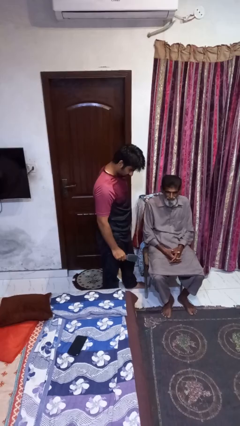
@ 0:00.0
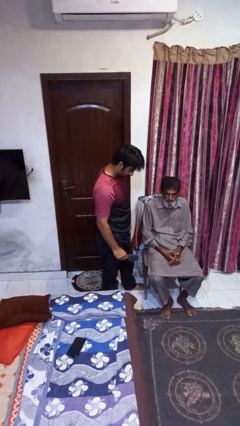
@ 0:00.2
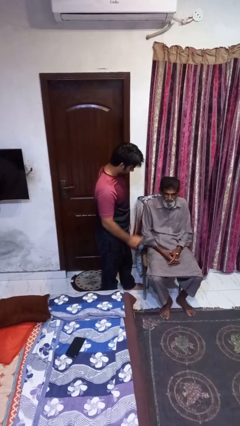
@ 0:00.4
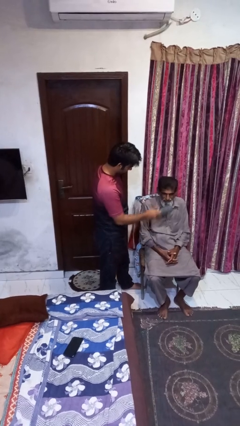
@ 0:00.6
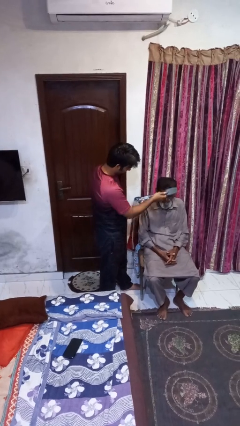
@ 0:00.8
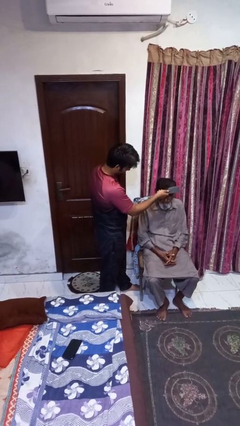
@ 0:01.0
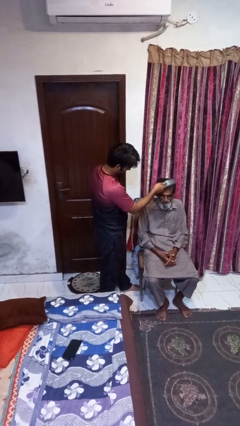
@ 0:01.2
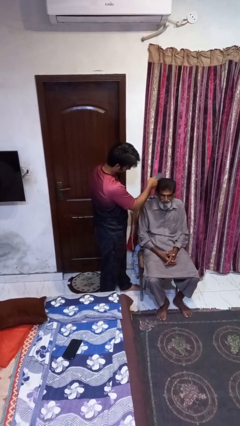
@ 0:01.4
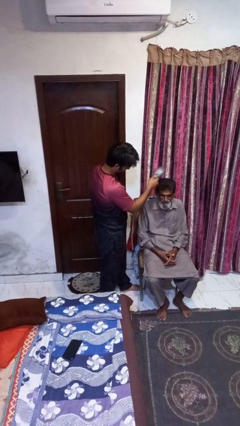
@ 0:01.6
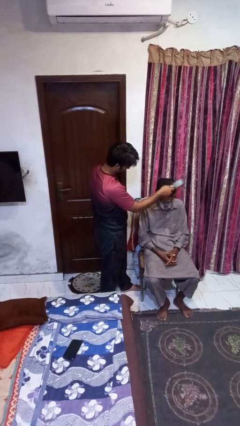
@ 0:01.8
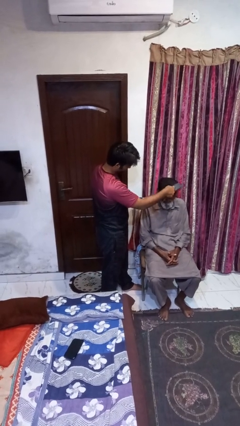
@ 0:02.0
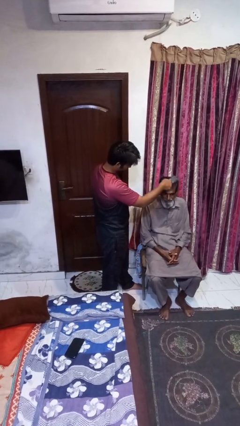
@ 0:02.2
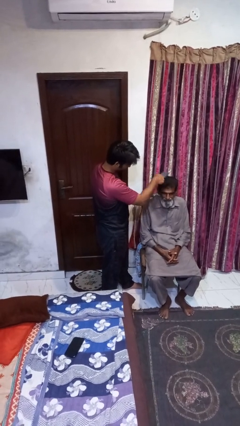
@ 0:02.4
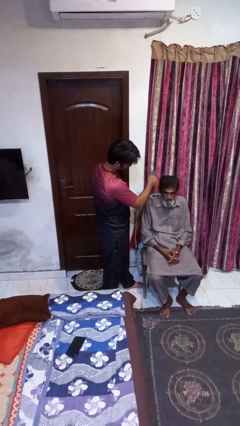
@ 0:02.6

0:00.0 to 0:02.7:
person brushes hair of person

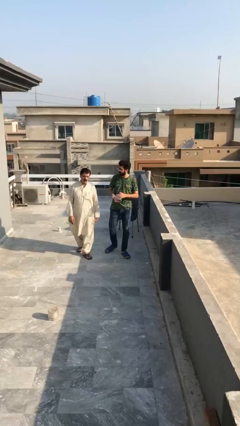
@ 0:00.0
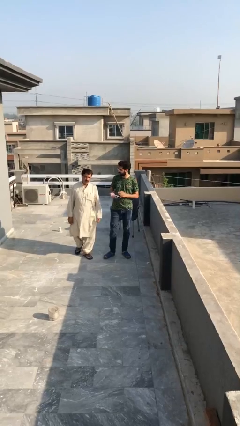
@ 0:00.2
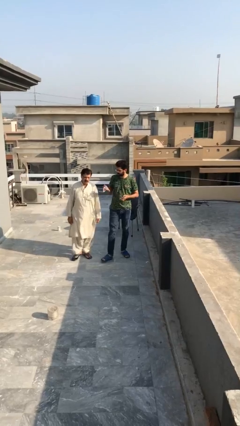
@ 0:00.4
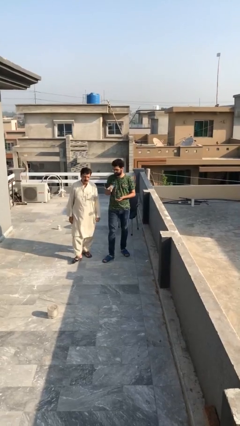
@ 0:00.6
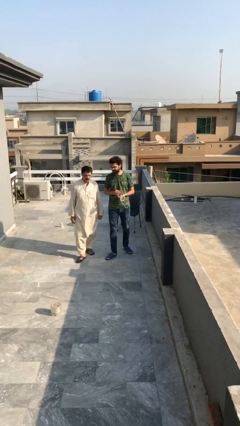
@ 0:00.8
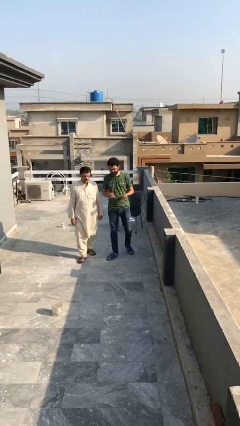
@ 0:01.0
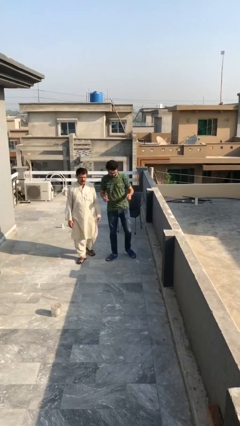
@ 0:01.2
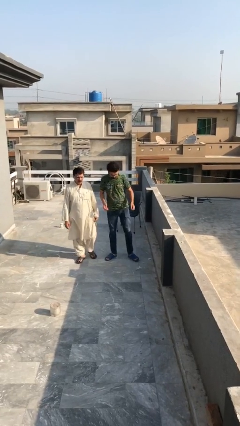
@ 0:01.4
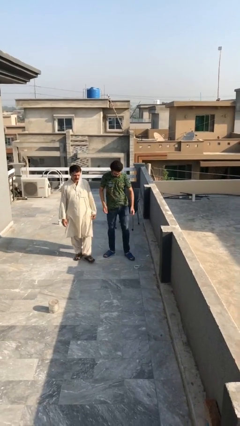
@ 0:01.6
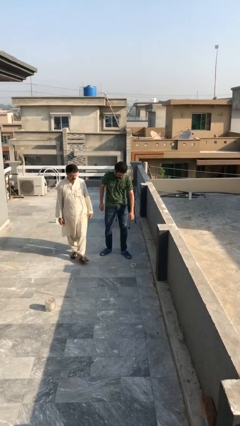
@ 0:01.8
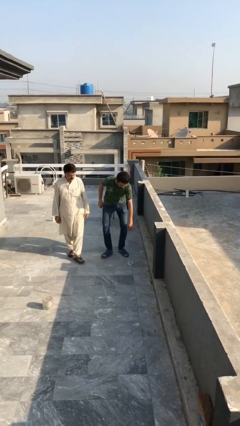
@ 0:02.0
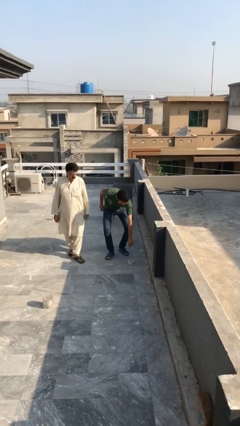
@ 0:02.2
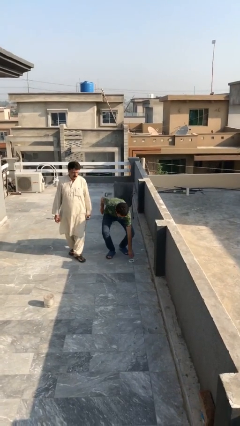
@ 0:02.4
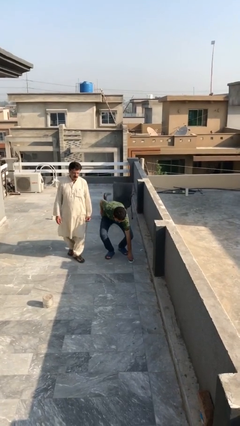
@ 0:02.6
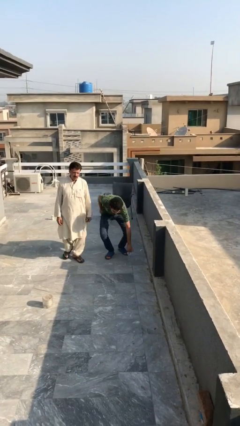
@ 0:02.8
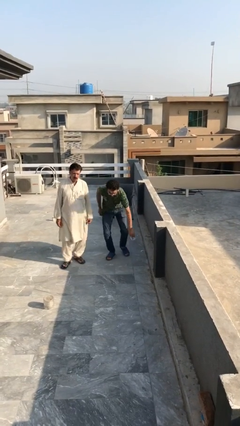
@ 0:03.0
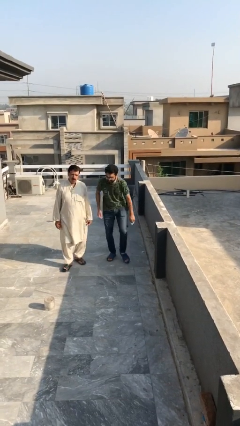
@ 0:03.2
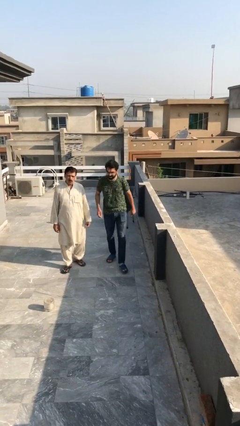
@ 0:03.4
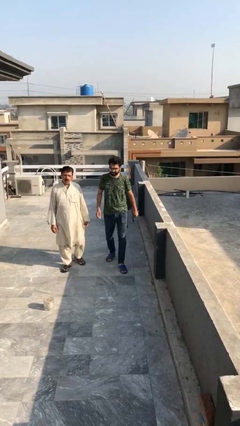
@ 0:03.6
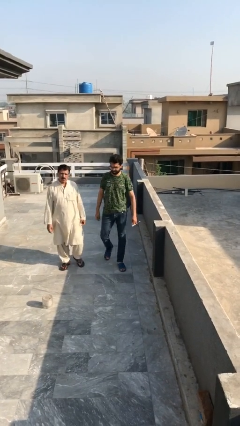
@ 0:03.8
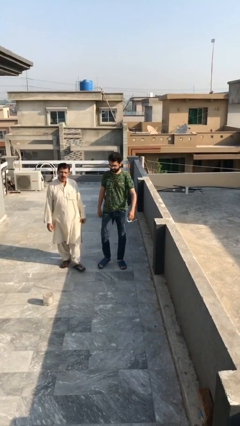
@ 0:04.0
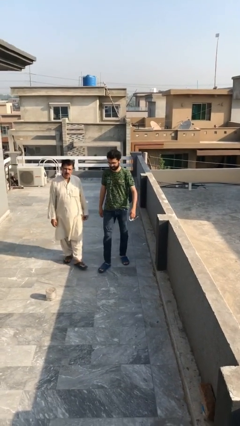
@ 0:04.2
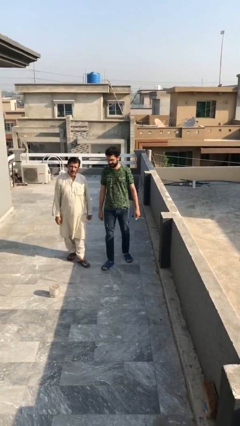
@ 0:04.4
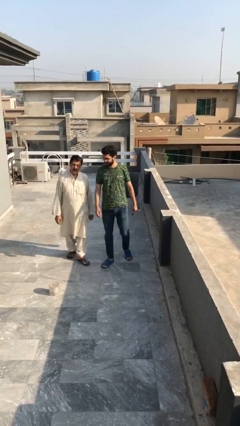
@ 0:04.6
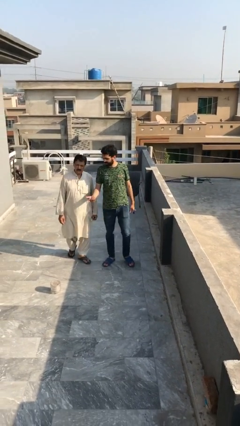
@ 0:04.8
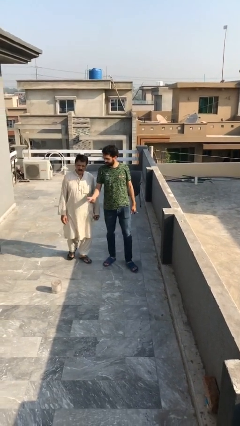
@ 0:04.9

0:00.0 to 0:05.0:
person talks to person

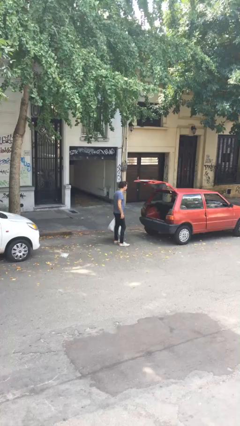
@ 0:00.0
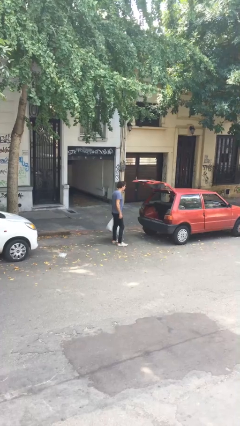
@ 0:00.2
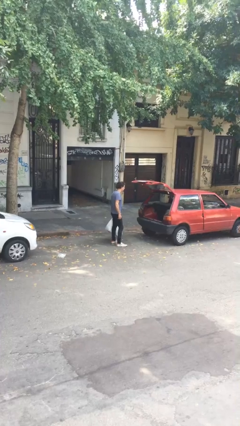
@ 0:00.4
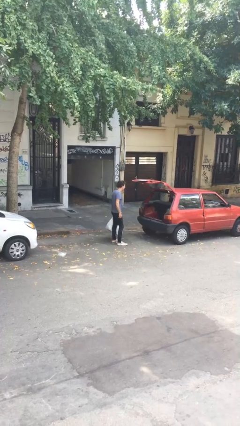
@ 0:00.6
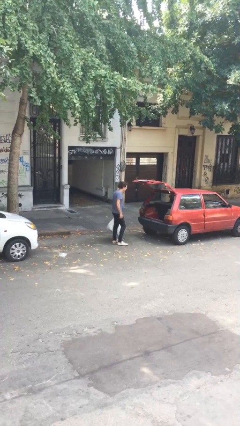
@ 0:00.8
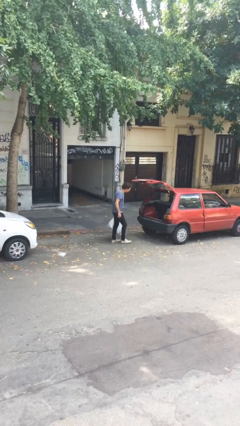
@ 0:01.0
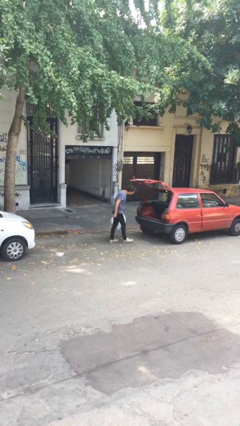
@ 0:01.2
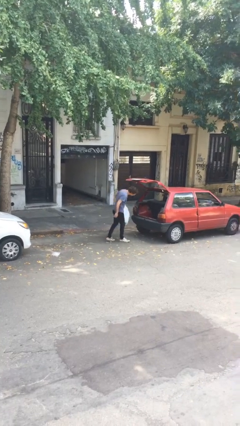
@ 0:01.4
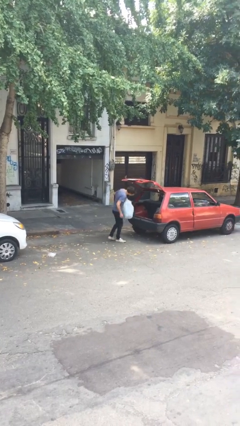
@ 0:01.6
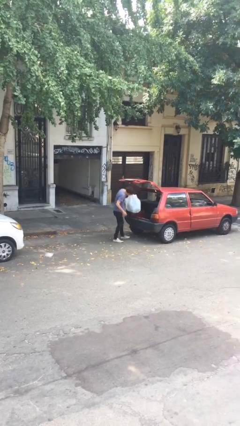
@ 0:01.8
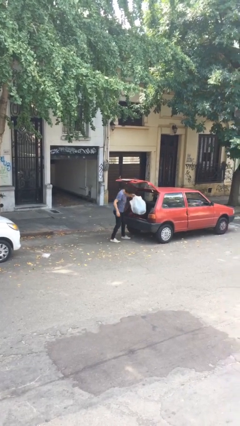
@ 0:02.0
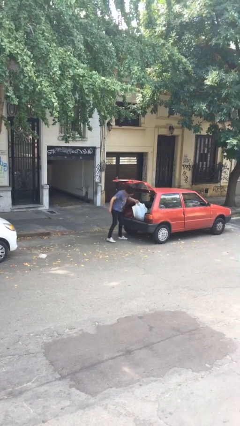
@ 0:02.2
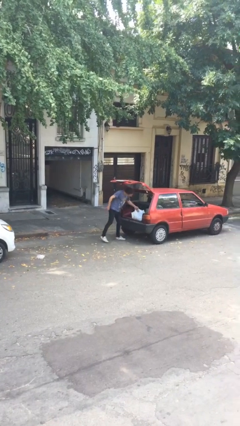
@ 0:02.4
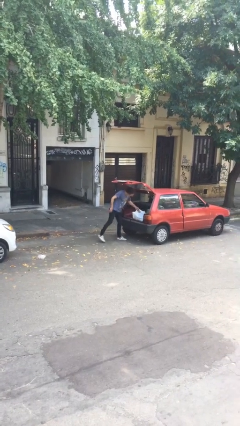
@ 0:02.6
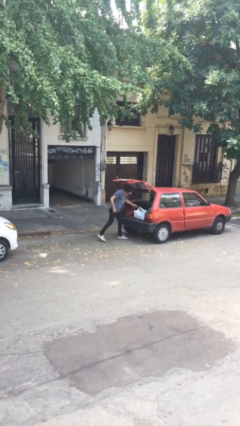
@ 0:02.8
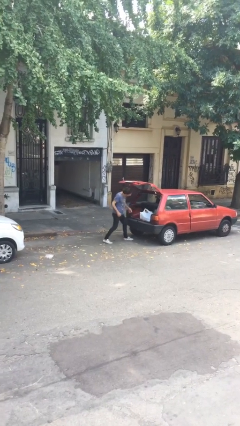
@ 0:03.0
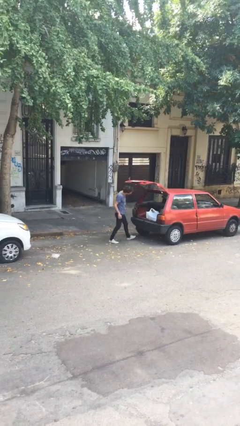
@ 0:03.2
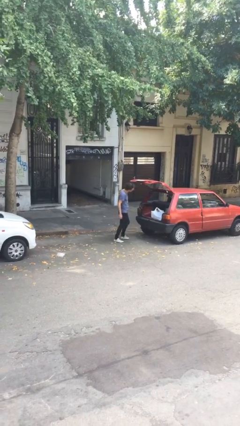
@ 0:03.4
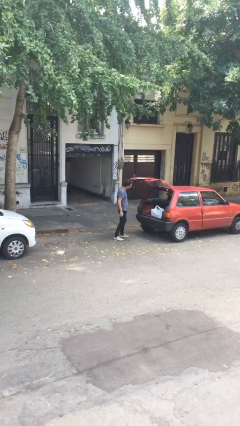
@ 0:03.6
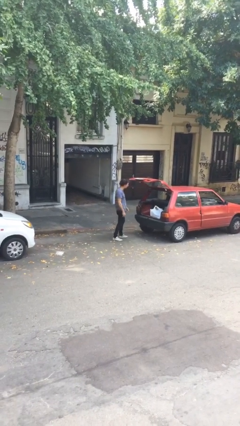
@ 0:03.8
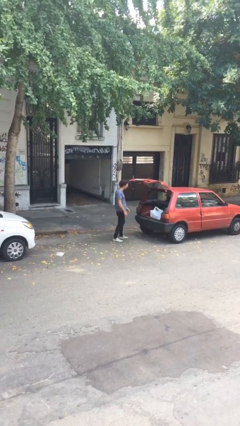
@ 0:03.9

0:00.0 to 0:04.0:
person loads car

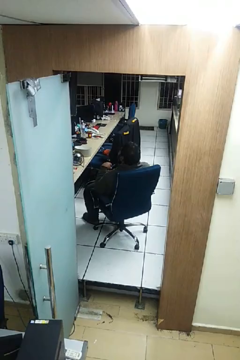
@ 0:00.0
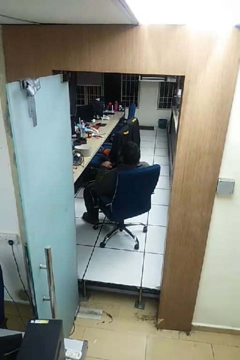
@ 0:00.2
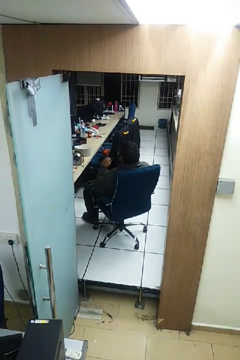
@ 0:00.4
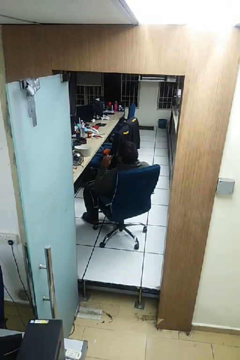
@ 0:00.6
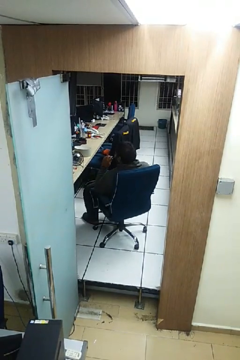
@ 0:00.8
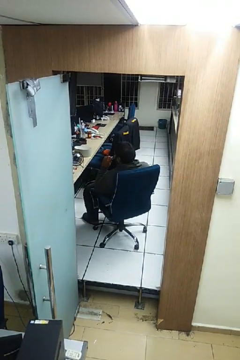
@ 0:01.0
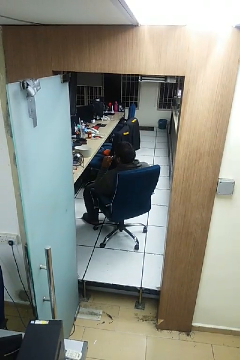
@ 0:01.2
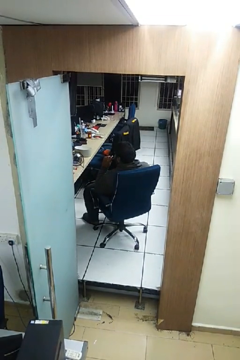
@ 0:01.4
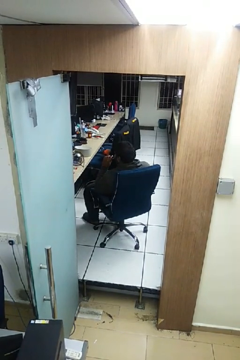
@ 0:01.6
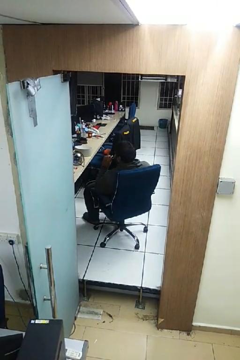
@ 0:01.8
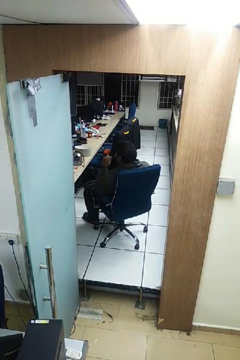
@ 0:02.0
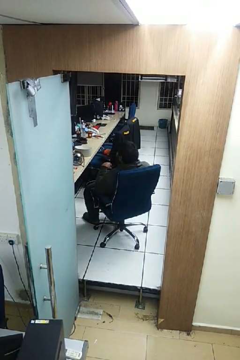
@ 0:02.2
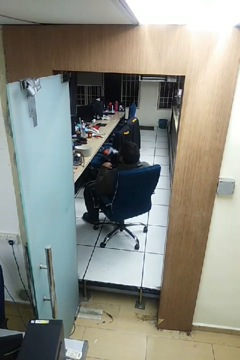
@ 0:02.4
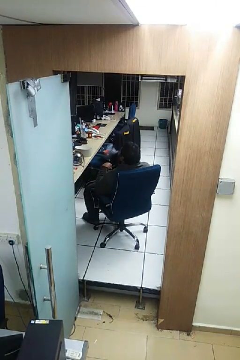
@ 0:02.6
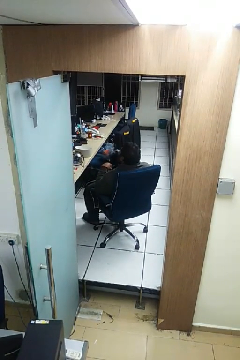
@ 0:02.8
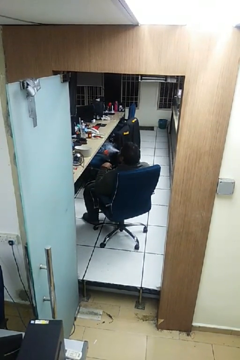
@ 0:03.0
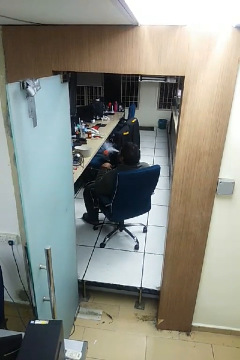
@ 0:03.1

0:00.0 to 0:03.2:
person vapes

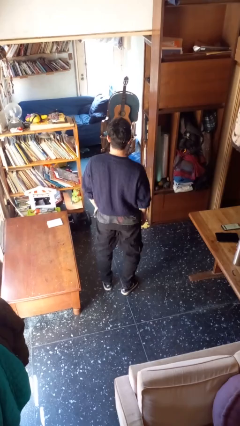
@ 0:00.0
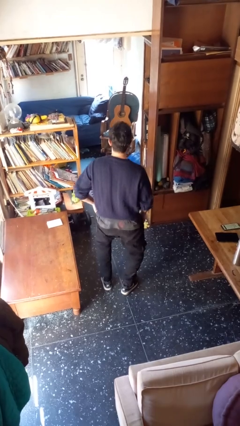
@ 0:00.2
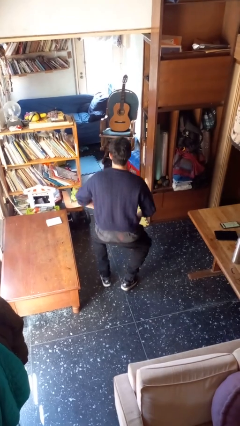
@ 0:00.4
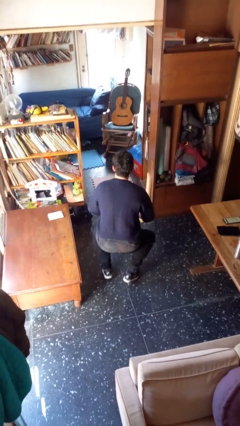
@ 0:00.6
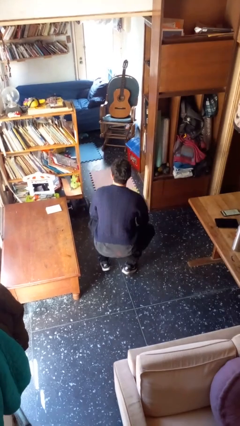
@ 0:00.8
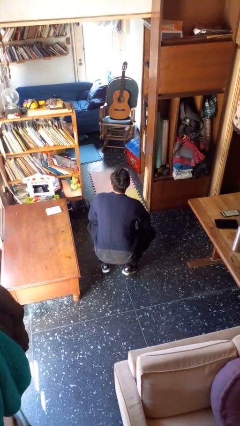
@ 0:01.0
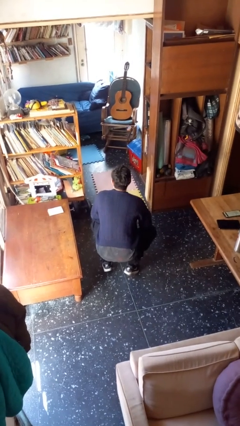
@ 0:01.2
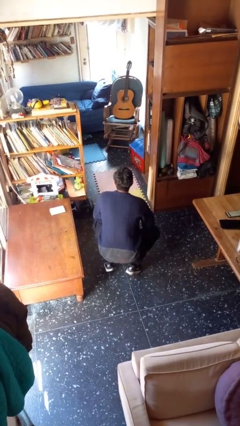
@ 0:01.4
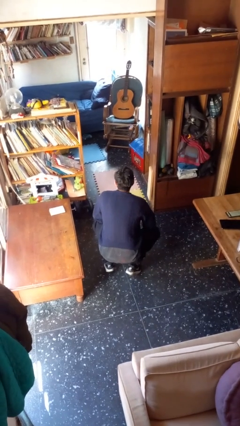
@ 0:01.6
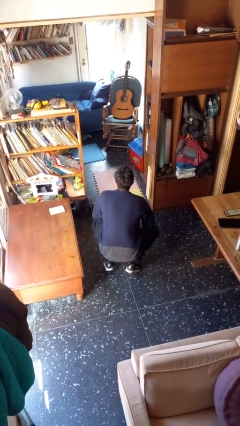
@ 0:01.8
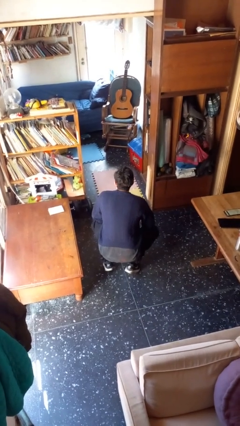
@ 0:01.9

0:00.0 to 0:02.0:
person squats

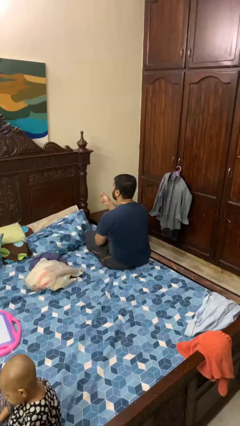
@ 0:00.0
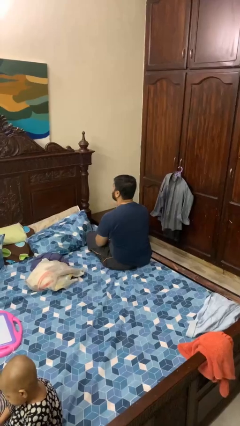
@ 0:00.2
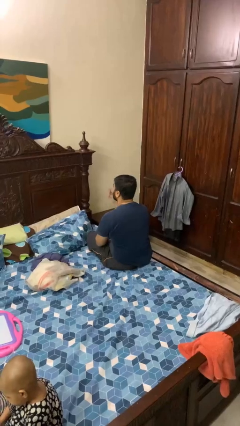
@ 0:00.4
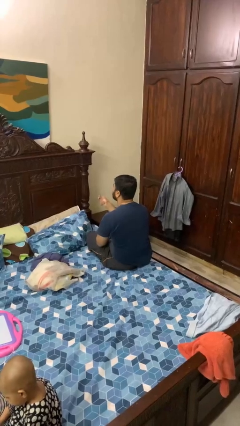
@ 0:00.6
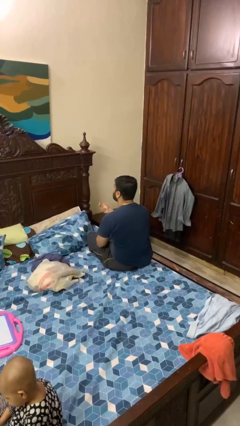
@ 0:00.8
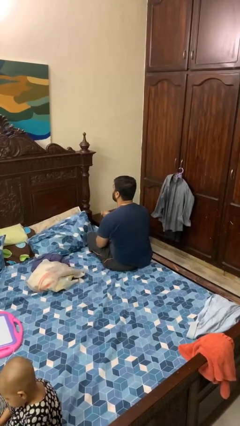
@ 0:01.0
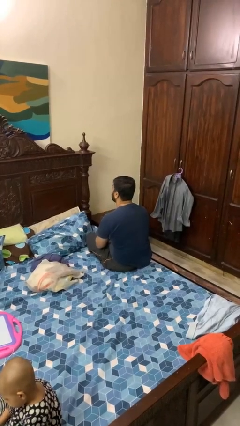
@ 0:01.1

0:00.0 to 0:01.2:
person snaps fingers
